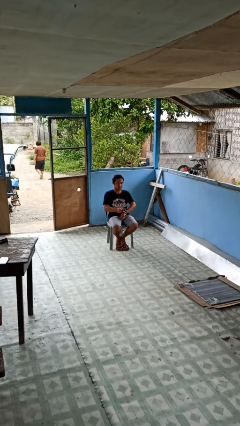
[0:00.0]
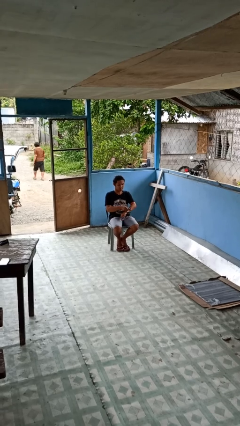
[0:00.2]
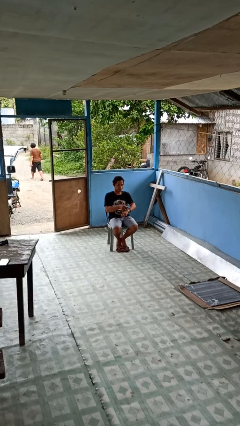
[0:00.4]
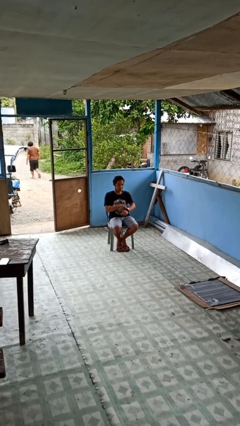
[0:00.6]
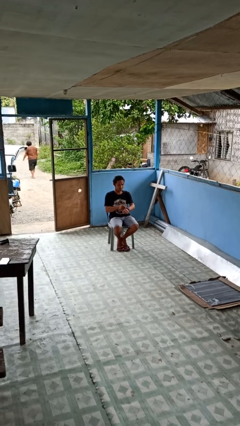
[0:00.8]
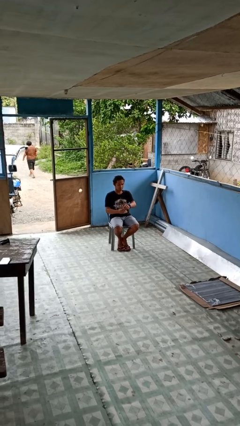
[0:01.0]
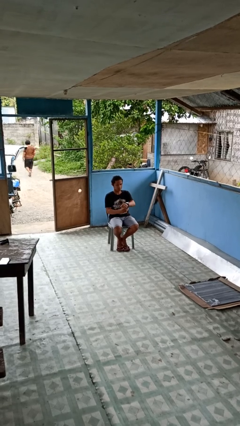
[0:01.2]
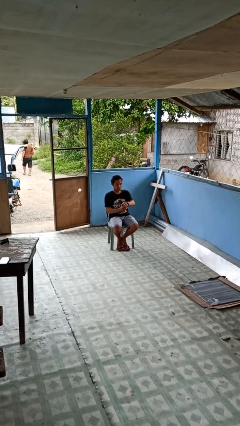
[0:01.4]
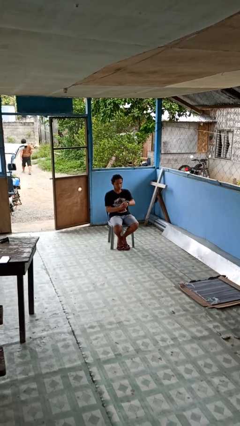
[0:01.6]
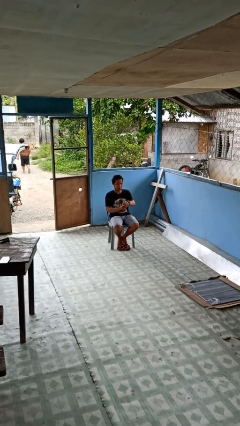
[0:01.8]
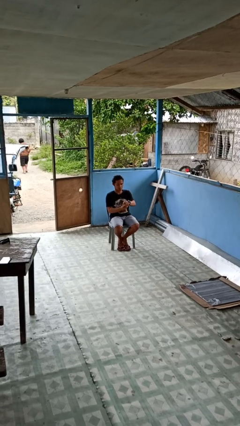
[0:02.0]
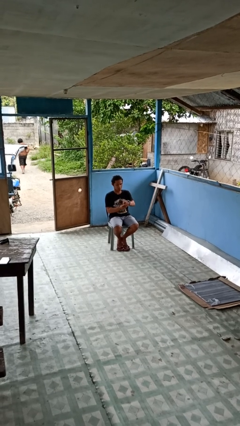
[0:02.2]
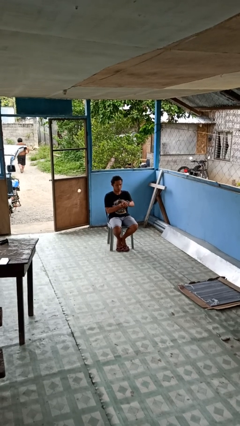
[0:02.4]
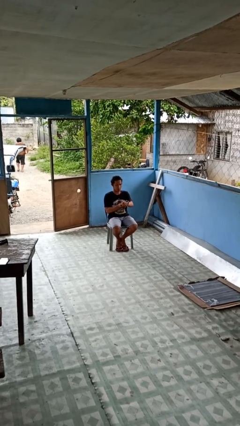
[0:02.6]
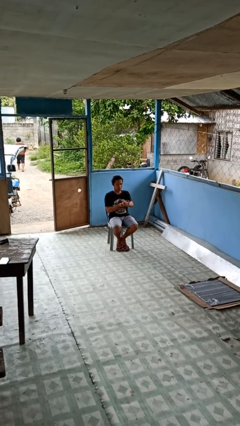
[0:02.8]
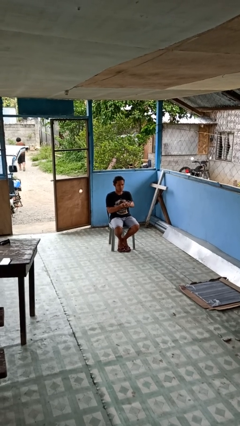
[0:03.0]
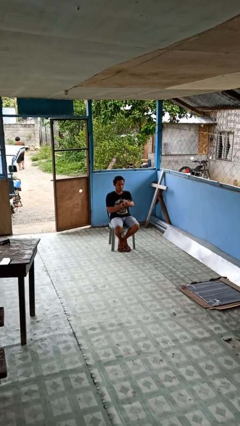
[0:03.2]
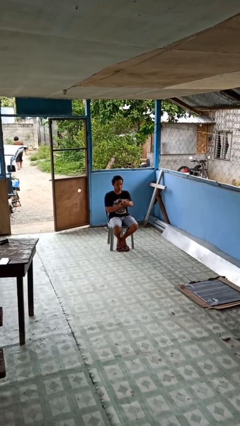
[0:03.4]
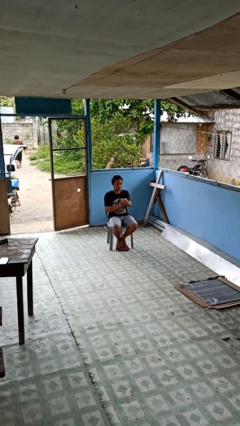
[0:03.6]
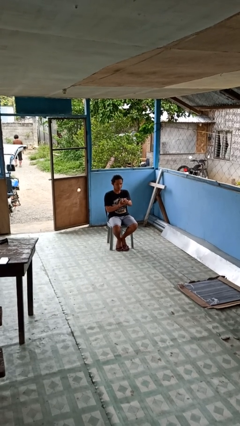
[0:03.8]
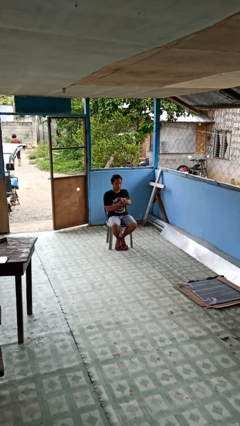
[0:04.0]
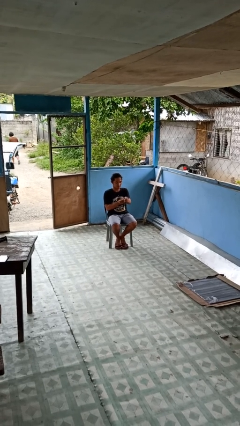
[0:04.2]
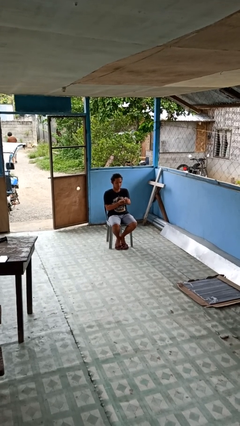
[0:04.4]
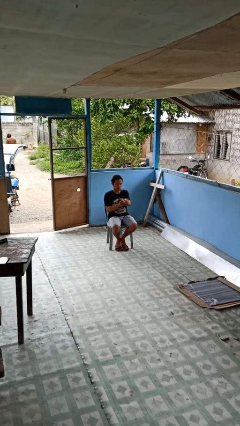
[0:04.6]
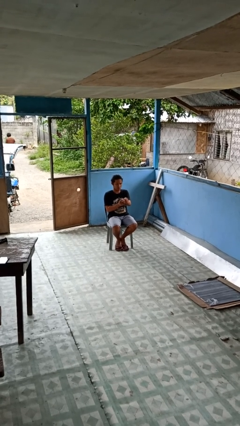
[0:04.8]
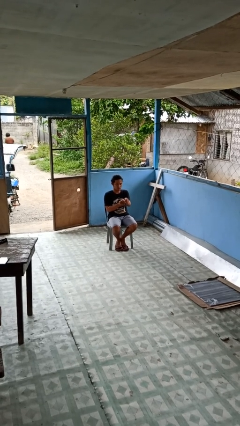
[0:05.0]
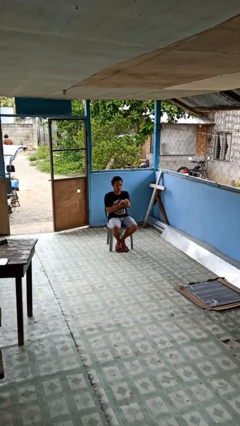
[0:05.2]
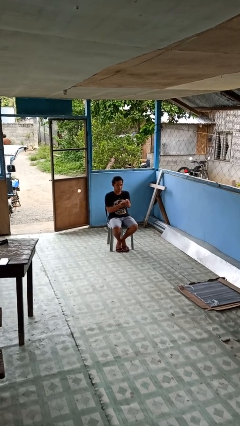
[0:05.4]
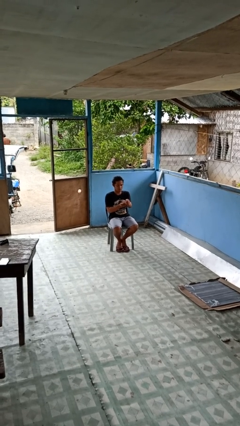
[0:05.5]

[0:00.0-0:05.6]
person puts on wristwatch

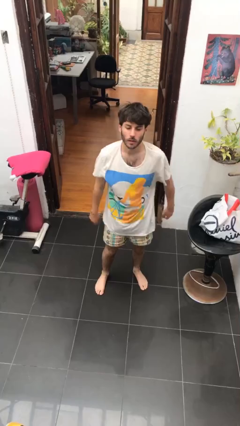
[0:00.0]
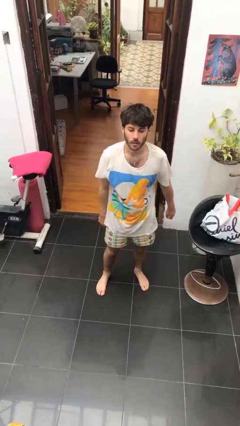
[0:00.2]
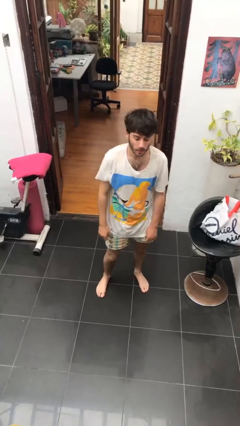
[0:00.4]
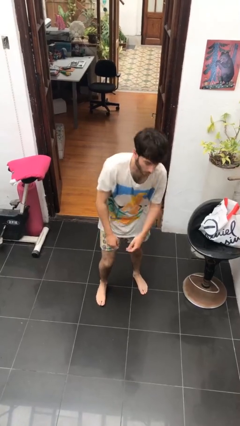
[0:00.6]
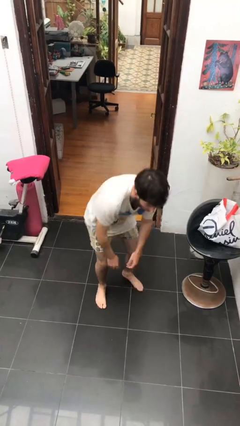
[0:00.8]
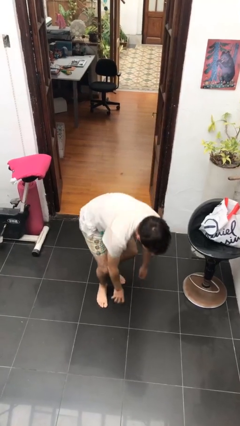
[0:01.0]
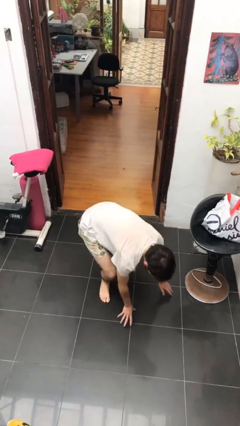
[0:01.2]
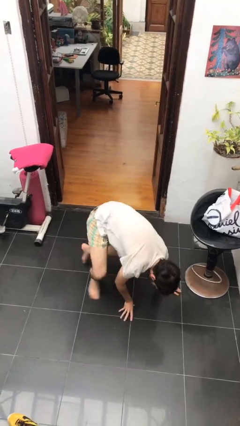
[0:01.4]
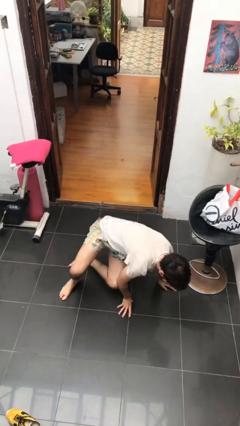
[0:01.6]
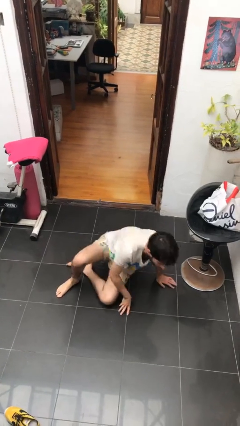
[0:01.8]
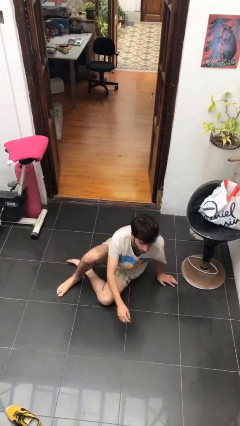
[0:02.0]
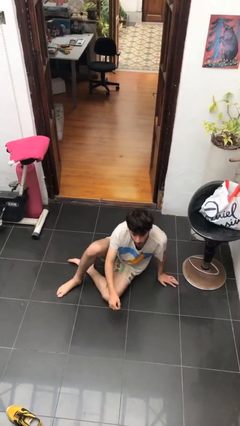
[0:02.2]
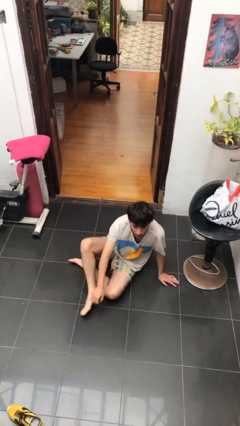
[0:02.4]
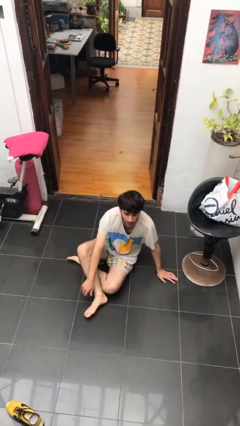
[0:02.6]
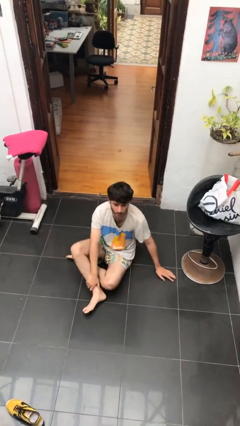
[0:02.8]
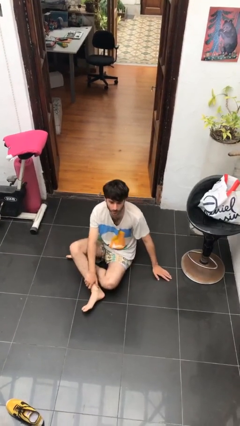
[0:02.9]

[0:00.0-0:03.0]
person sits down

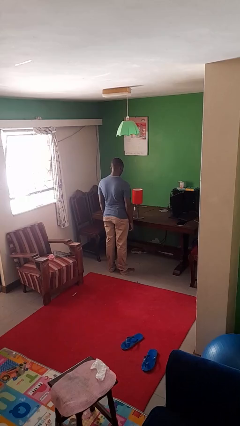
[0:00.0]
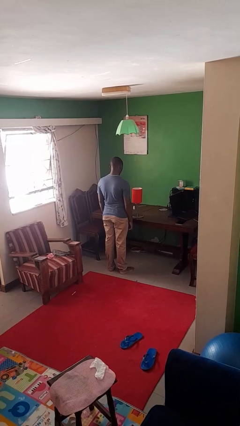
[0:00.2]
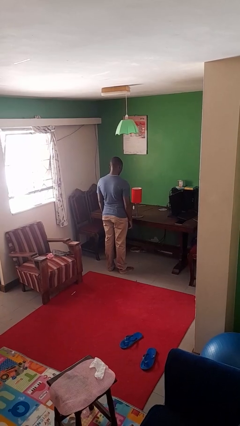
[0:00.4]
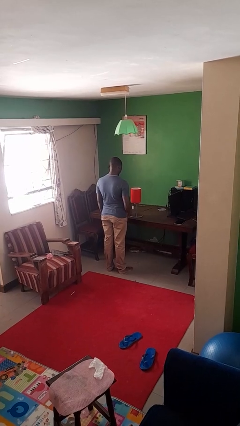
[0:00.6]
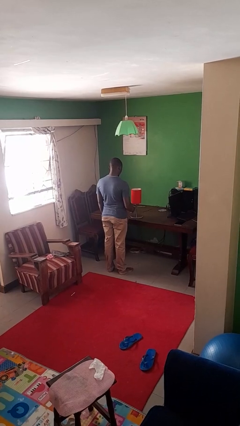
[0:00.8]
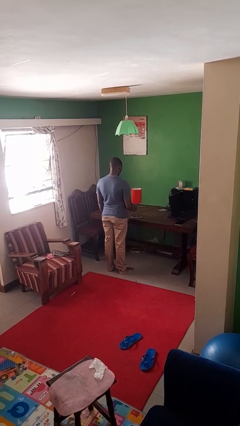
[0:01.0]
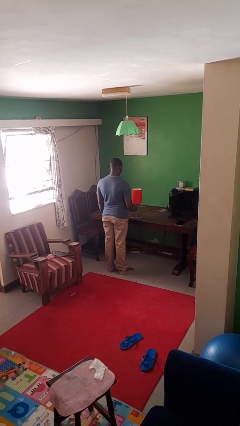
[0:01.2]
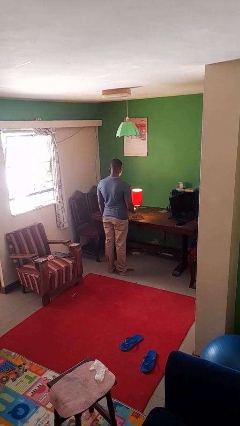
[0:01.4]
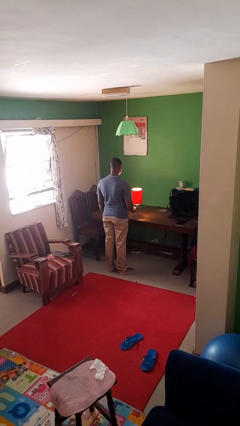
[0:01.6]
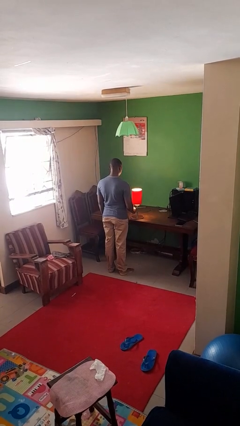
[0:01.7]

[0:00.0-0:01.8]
person turns on lamp

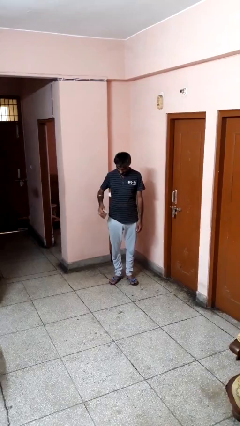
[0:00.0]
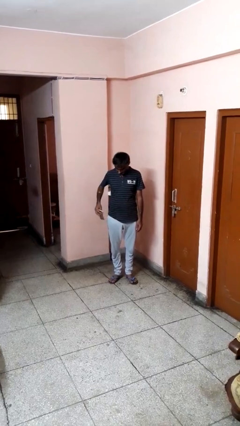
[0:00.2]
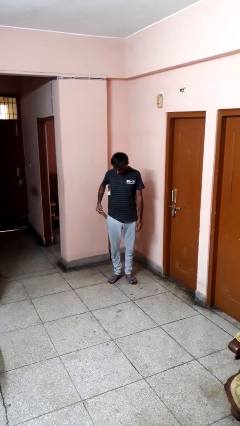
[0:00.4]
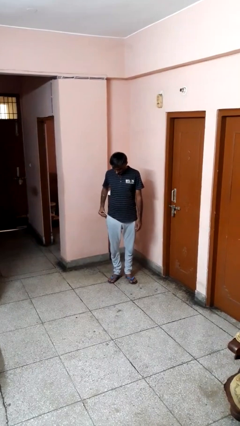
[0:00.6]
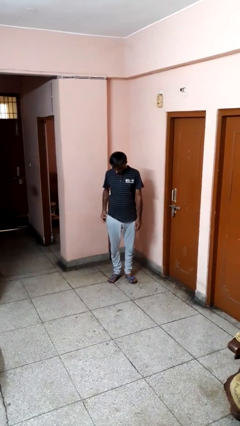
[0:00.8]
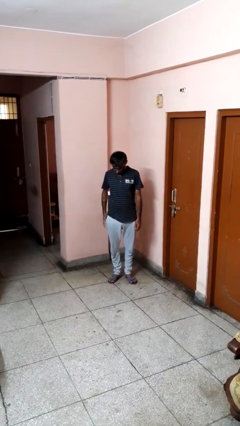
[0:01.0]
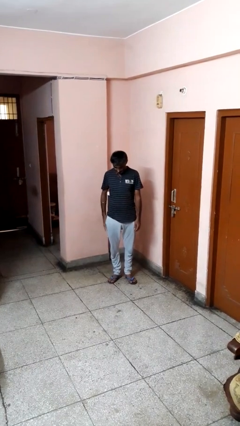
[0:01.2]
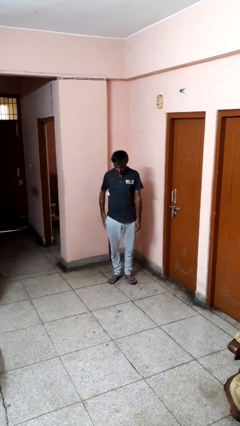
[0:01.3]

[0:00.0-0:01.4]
person puts phone into pocket

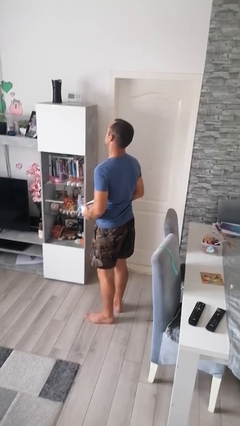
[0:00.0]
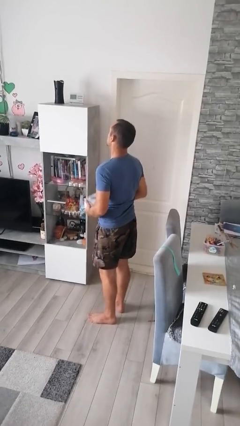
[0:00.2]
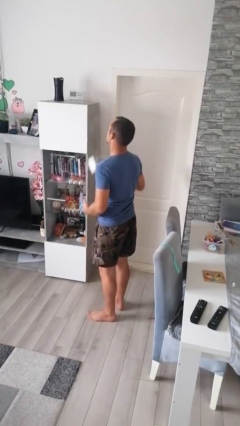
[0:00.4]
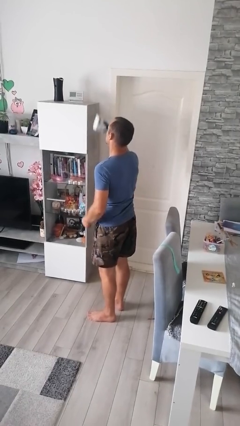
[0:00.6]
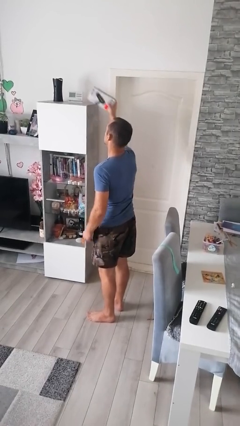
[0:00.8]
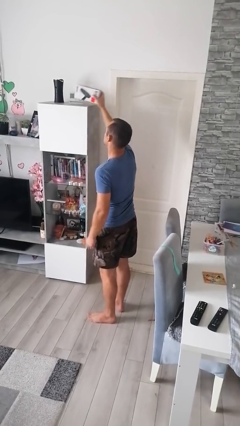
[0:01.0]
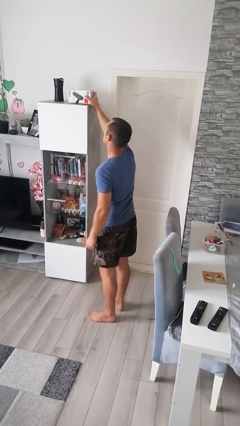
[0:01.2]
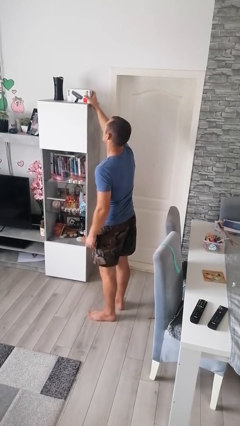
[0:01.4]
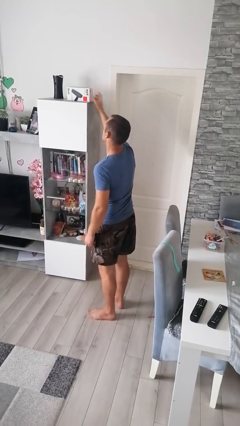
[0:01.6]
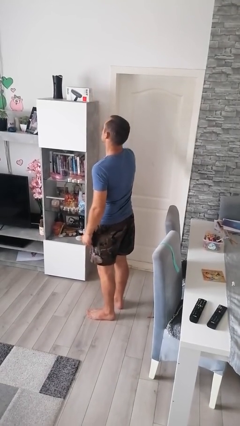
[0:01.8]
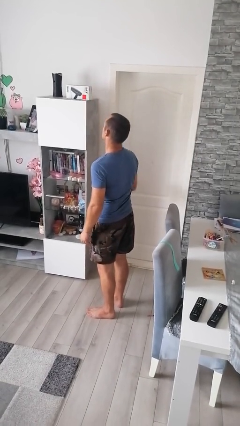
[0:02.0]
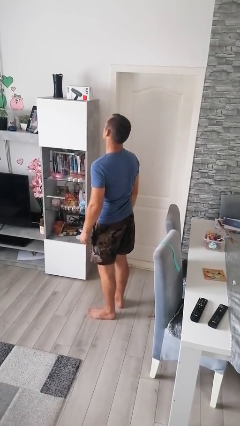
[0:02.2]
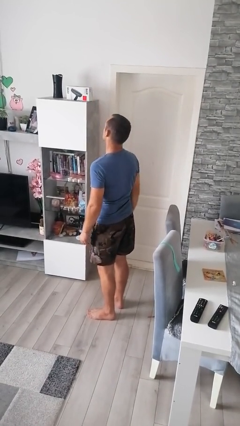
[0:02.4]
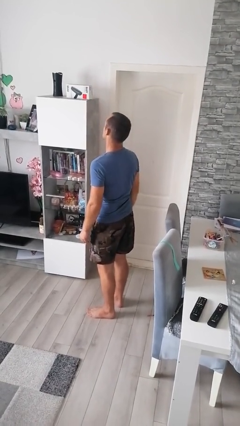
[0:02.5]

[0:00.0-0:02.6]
person picks up object from shelf

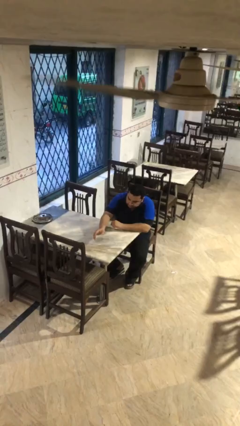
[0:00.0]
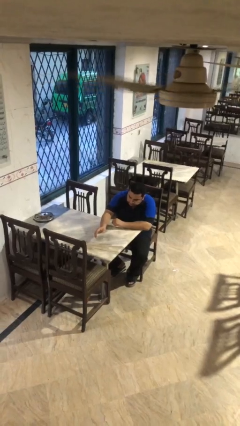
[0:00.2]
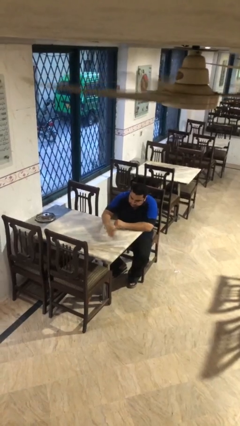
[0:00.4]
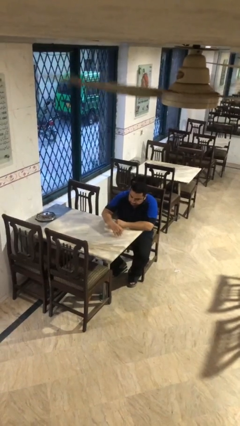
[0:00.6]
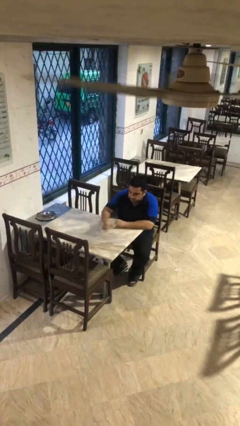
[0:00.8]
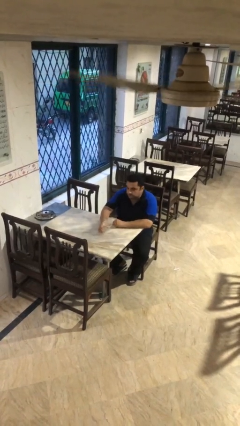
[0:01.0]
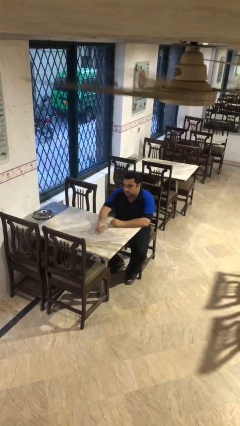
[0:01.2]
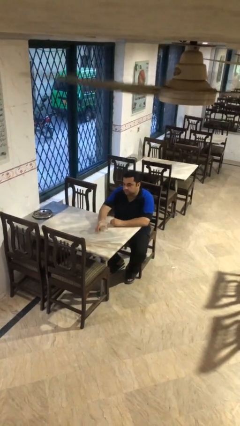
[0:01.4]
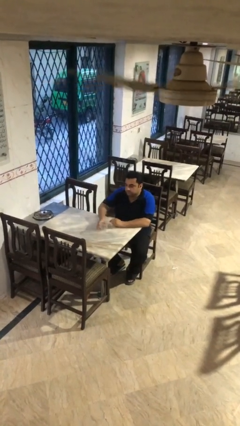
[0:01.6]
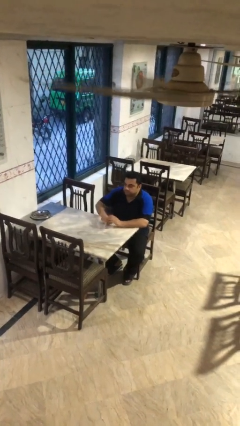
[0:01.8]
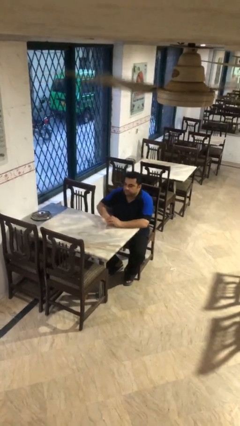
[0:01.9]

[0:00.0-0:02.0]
person sets upright glass

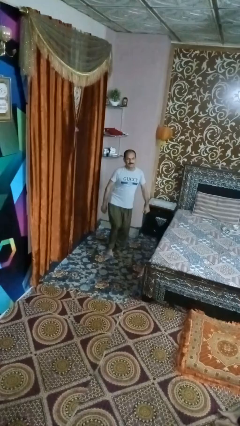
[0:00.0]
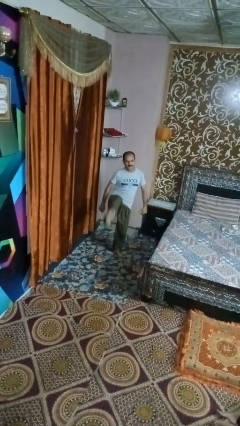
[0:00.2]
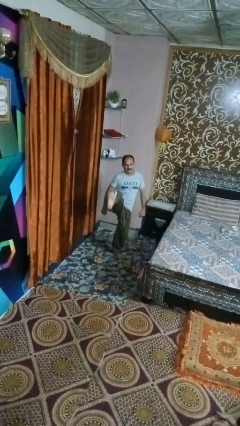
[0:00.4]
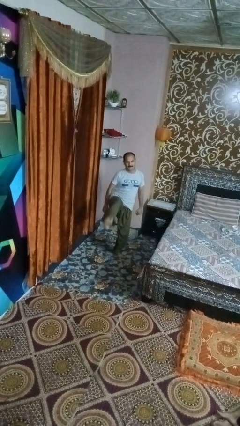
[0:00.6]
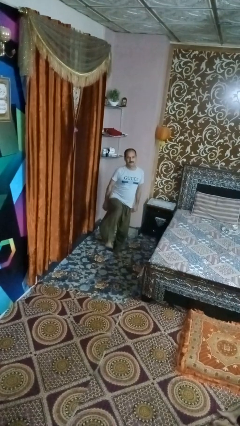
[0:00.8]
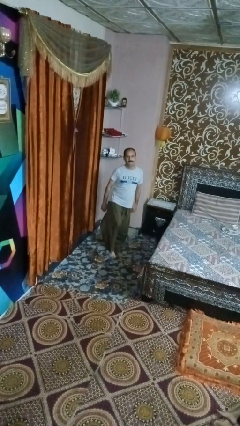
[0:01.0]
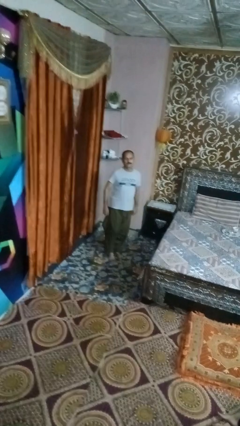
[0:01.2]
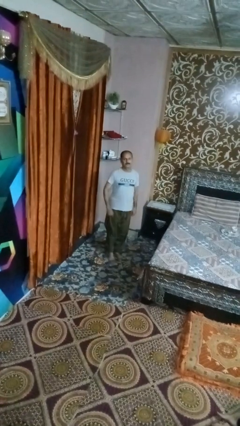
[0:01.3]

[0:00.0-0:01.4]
person karate kicks
